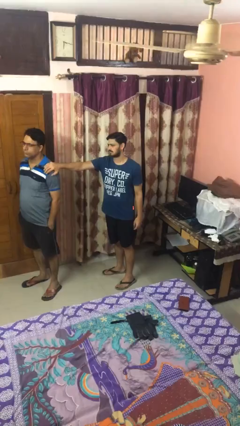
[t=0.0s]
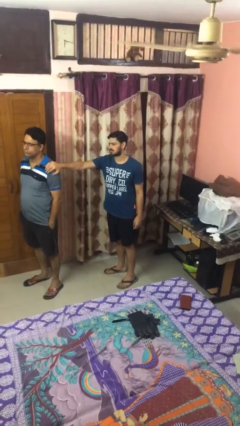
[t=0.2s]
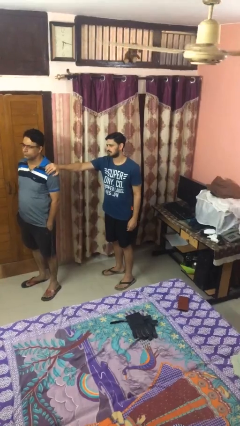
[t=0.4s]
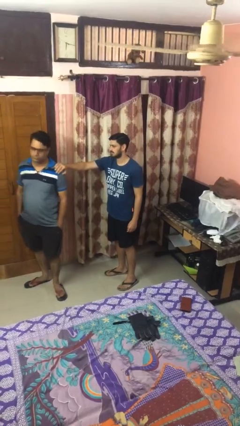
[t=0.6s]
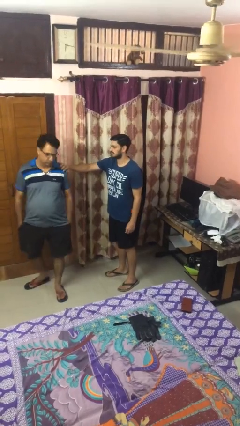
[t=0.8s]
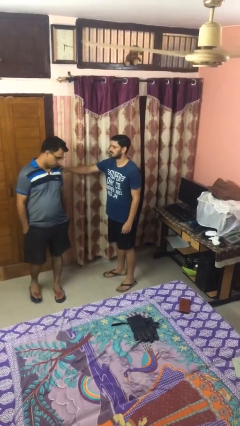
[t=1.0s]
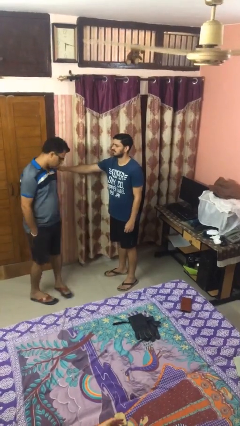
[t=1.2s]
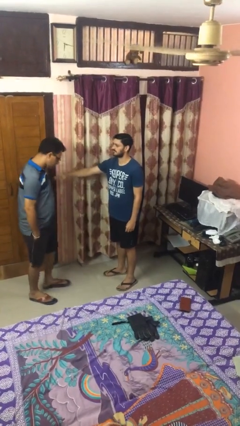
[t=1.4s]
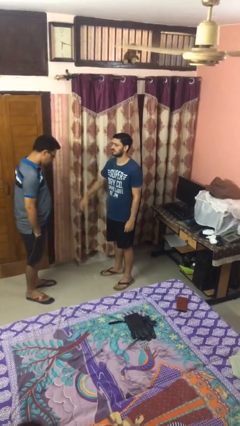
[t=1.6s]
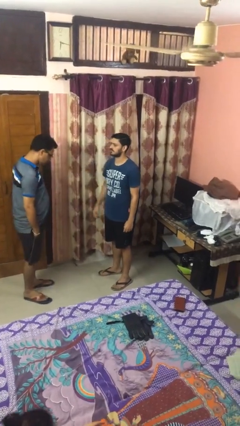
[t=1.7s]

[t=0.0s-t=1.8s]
person spins person around

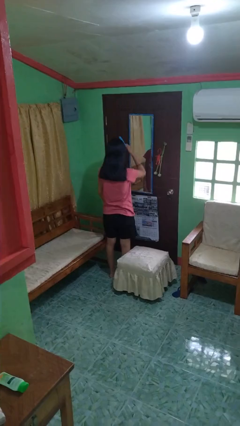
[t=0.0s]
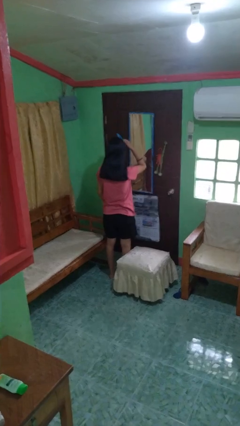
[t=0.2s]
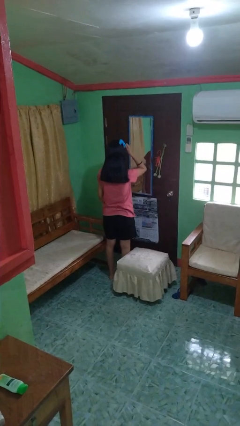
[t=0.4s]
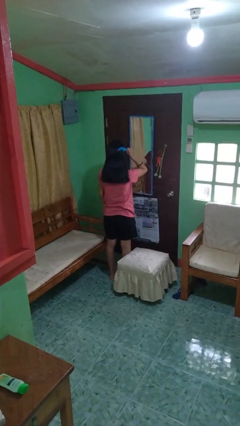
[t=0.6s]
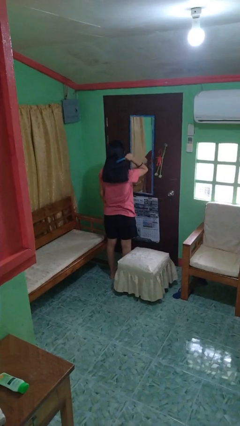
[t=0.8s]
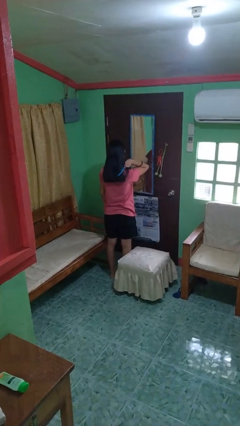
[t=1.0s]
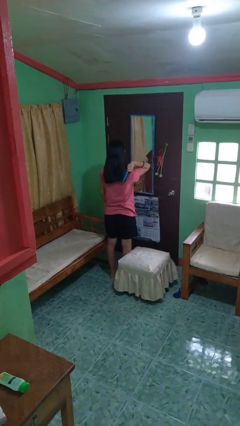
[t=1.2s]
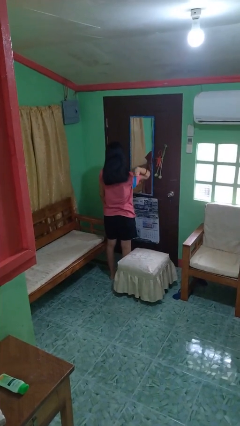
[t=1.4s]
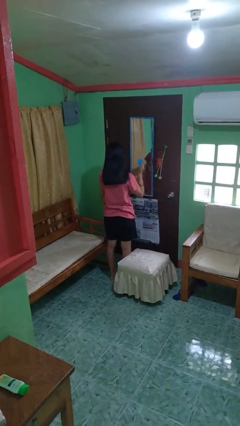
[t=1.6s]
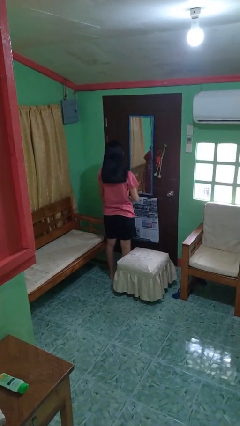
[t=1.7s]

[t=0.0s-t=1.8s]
person brushes hair

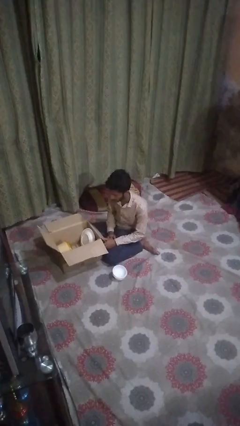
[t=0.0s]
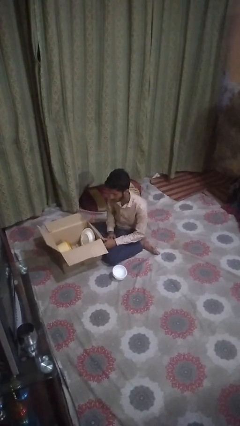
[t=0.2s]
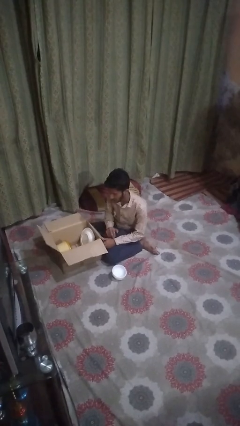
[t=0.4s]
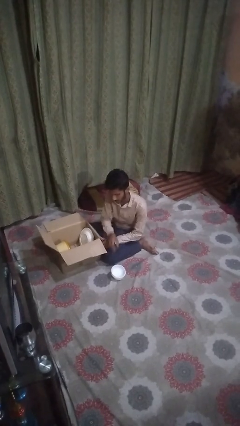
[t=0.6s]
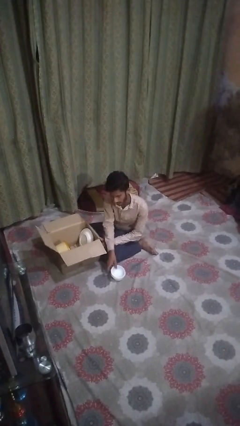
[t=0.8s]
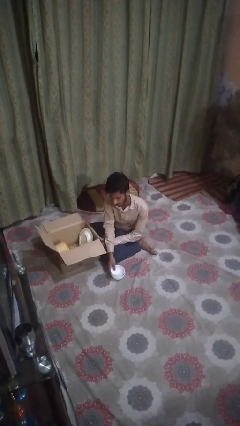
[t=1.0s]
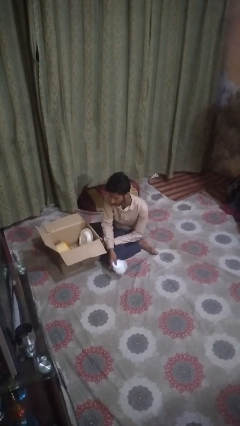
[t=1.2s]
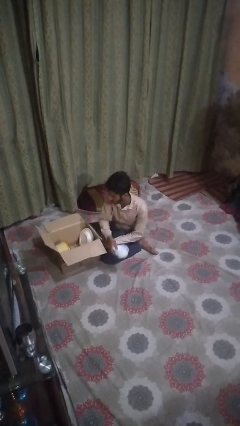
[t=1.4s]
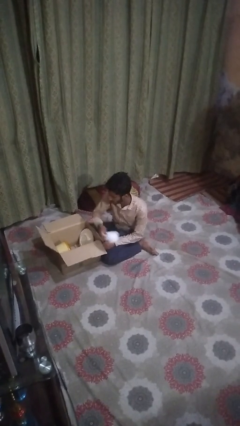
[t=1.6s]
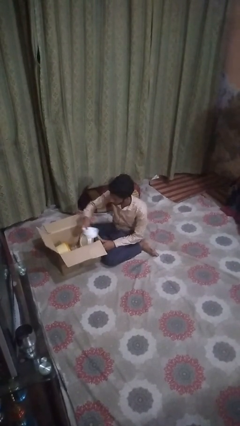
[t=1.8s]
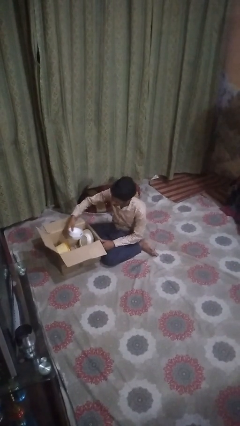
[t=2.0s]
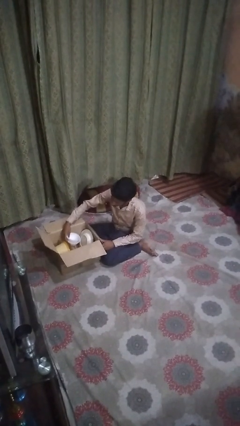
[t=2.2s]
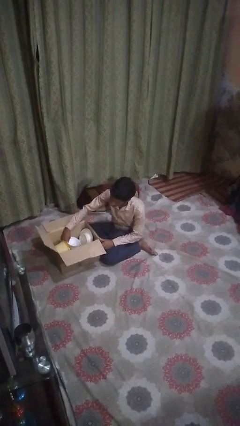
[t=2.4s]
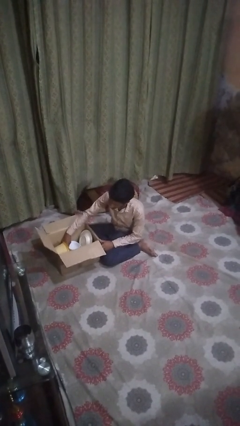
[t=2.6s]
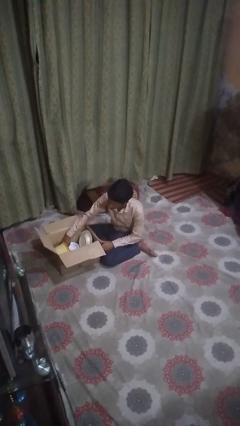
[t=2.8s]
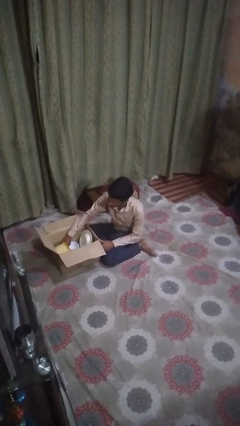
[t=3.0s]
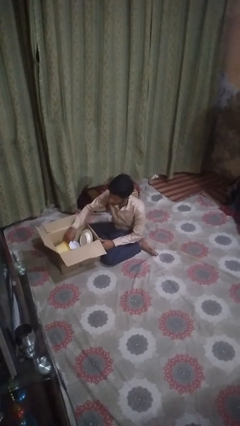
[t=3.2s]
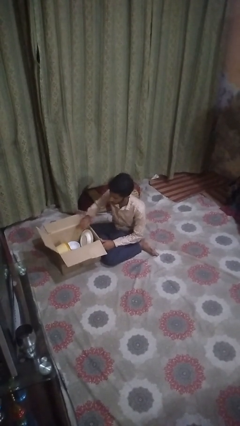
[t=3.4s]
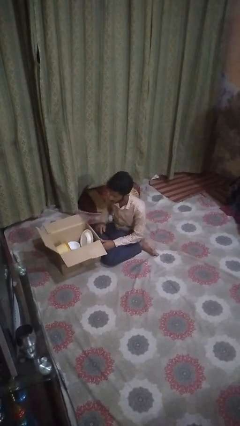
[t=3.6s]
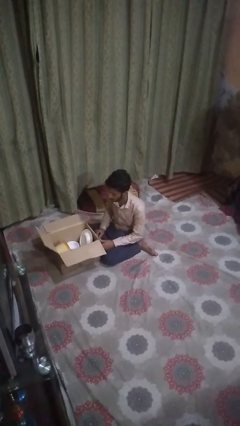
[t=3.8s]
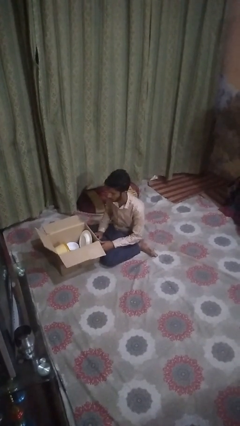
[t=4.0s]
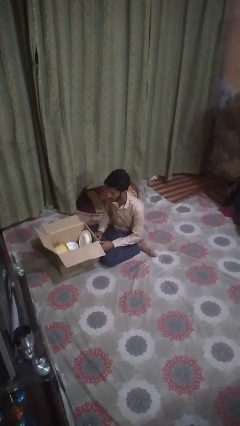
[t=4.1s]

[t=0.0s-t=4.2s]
person puts object into box

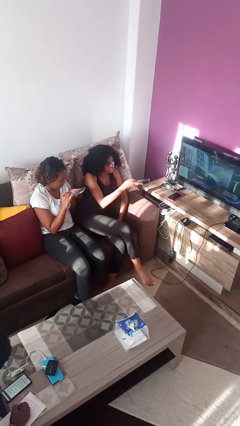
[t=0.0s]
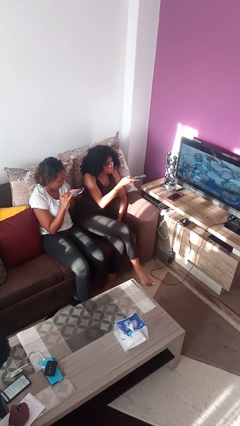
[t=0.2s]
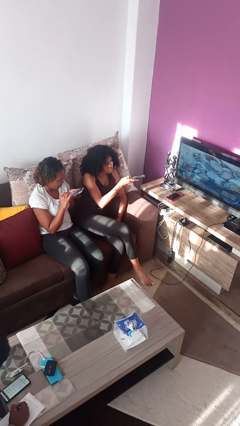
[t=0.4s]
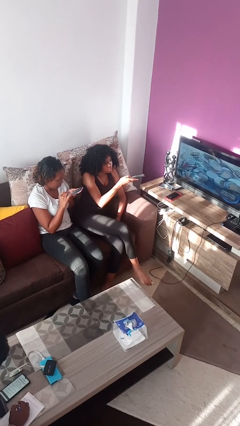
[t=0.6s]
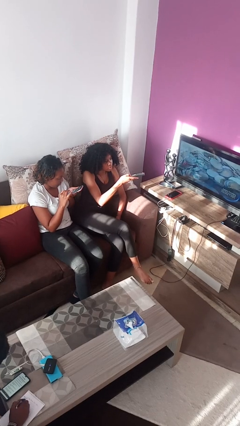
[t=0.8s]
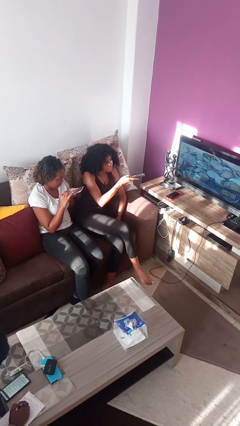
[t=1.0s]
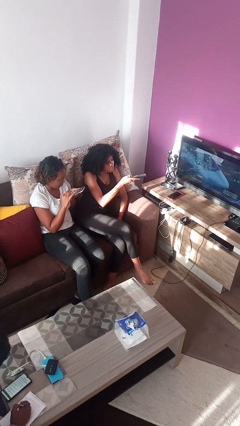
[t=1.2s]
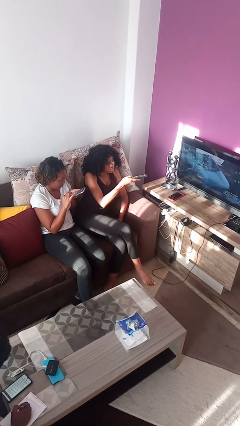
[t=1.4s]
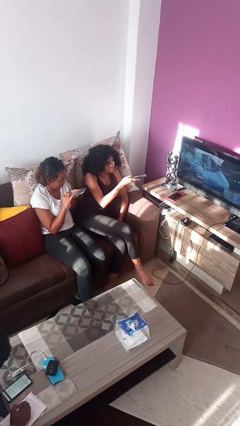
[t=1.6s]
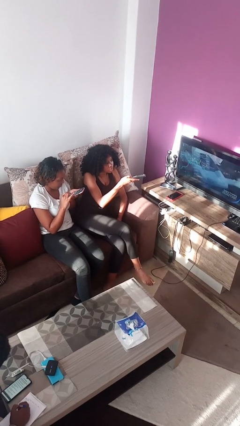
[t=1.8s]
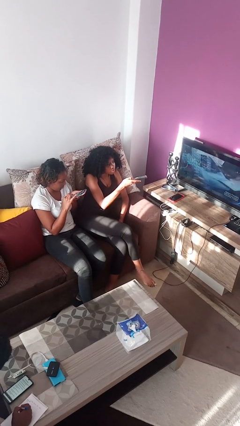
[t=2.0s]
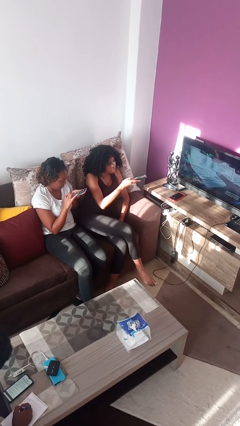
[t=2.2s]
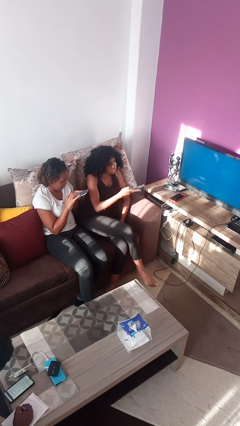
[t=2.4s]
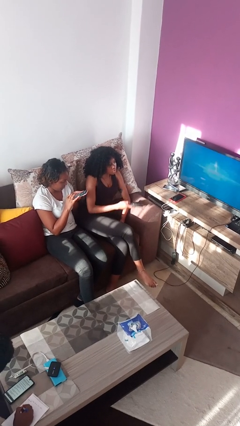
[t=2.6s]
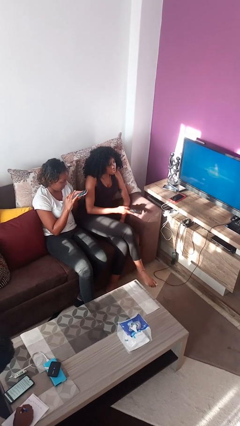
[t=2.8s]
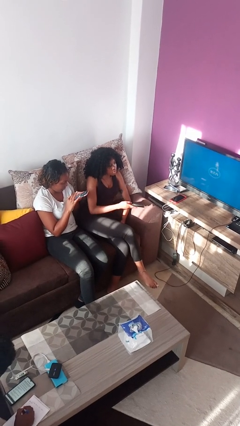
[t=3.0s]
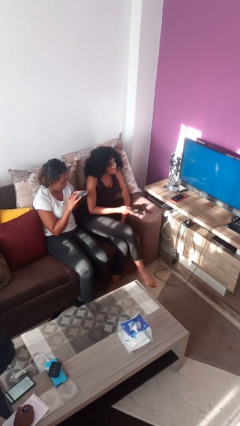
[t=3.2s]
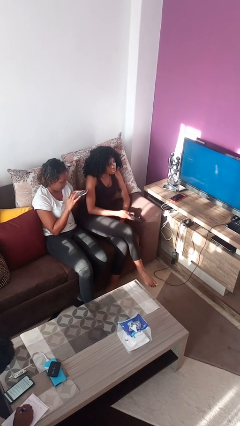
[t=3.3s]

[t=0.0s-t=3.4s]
person uses television remote

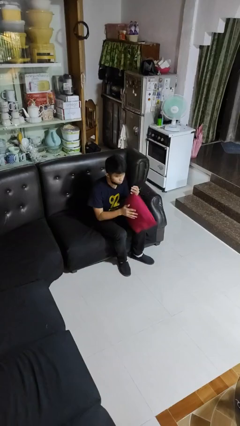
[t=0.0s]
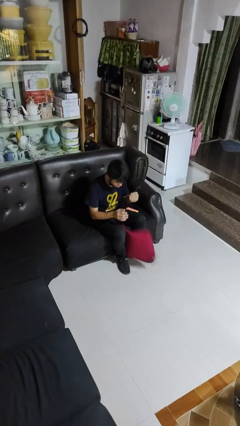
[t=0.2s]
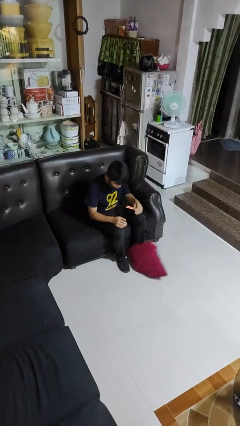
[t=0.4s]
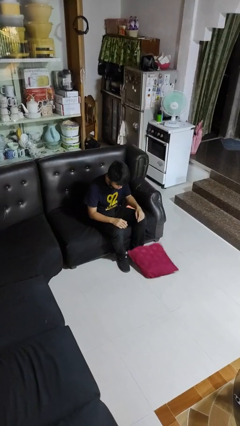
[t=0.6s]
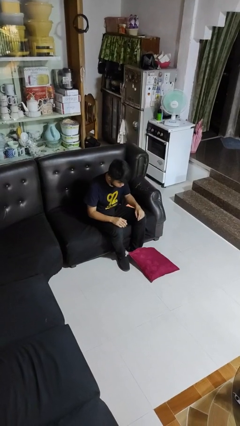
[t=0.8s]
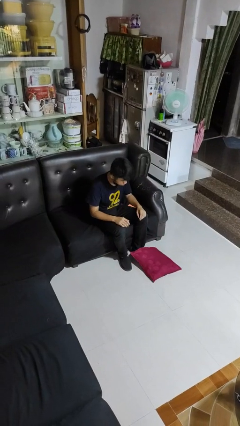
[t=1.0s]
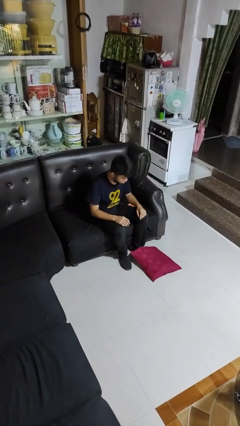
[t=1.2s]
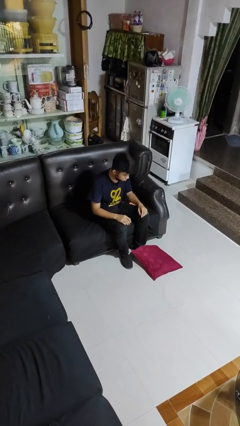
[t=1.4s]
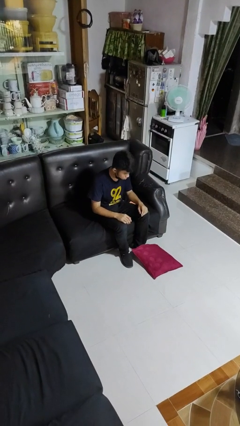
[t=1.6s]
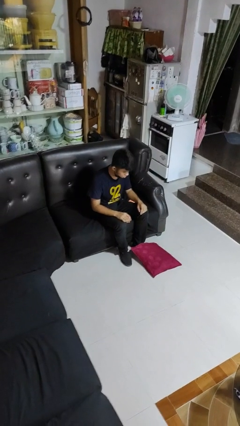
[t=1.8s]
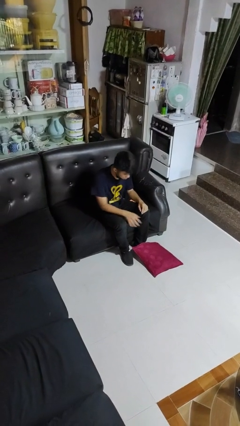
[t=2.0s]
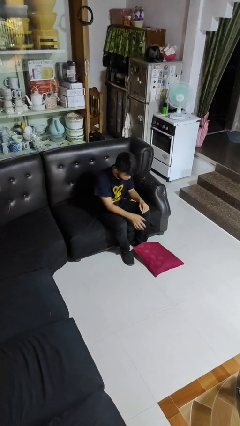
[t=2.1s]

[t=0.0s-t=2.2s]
person drops object

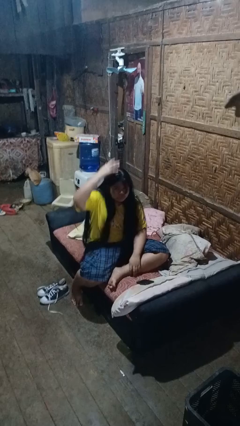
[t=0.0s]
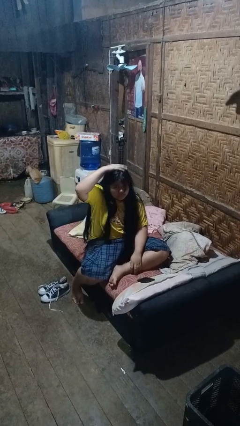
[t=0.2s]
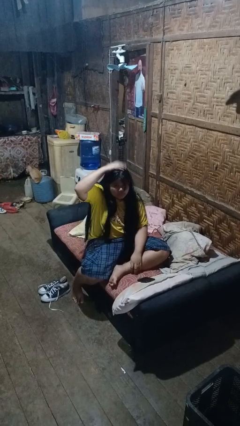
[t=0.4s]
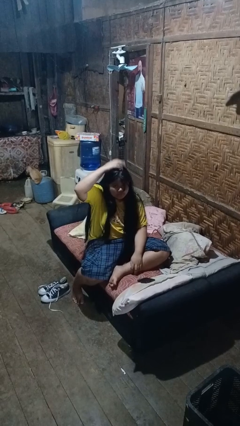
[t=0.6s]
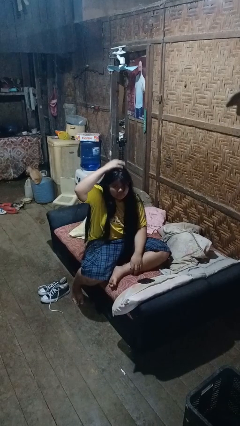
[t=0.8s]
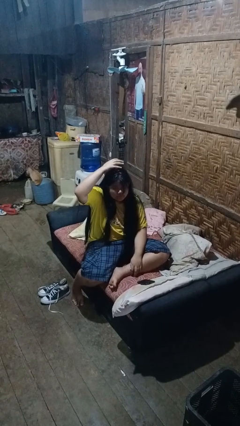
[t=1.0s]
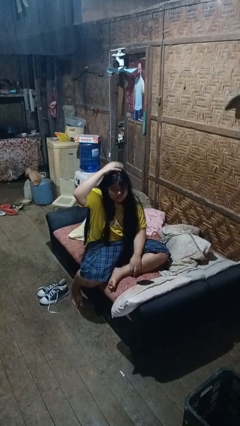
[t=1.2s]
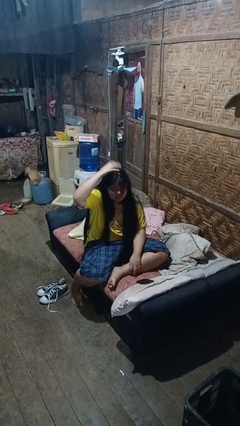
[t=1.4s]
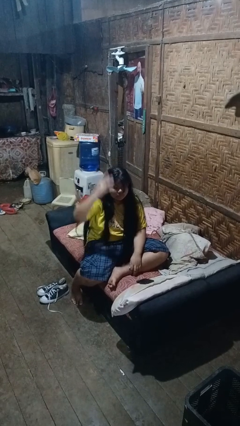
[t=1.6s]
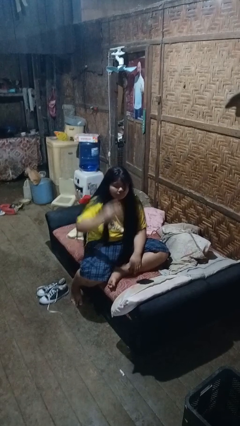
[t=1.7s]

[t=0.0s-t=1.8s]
person pats head

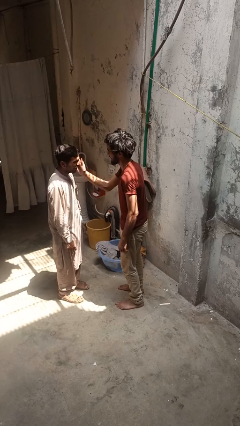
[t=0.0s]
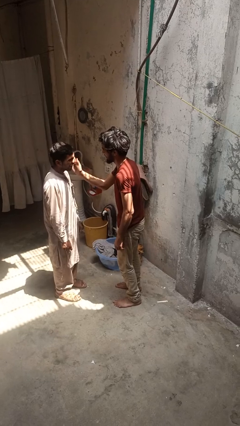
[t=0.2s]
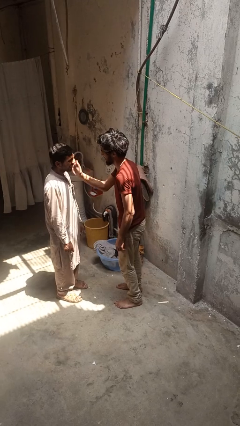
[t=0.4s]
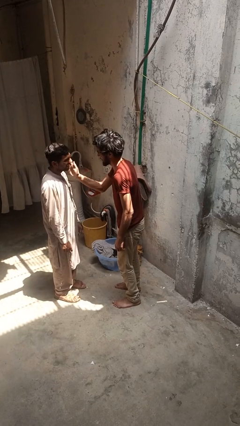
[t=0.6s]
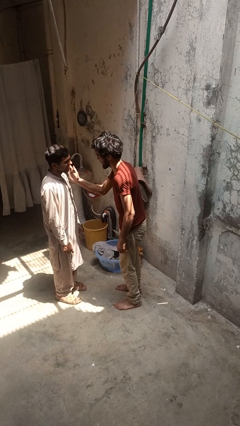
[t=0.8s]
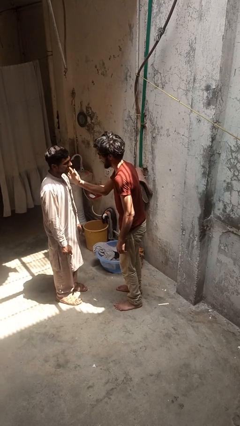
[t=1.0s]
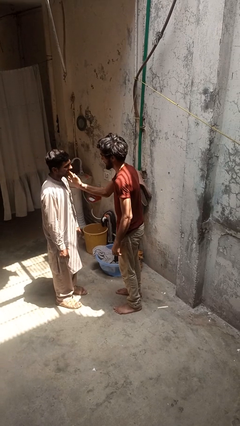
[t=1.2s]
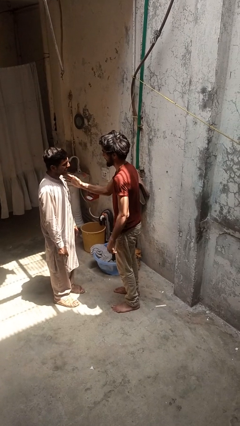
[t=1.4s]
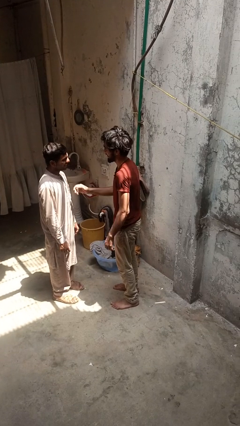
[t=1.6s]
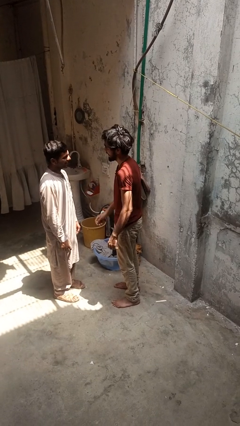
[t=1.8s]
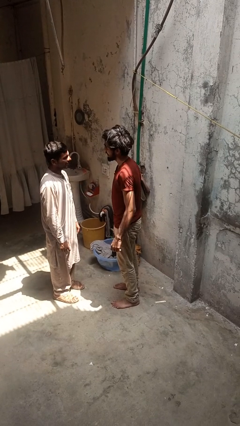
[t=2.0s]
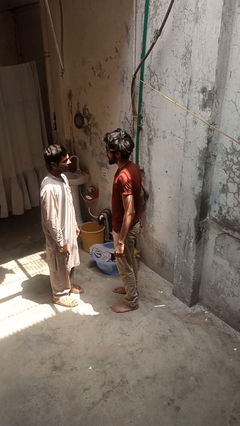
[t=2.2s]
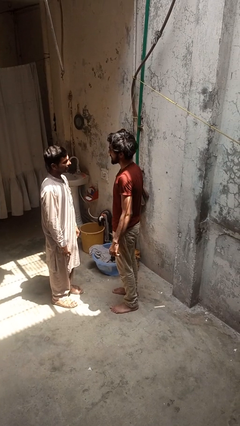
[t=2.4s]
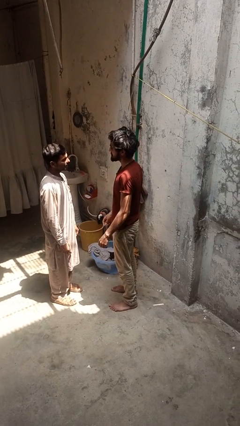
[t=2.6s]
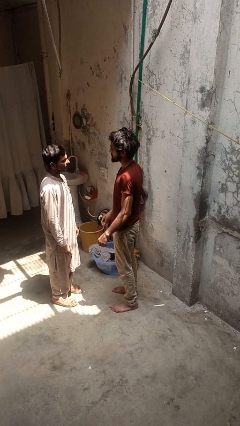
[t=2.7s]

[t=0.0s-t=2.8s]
person touches face of person
